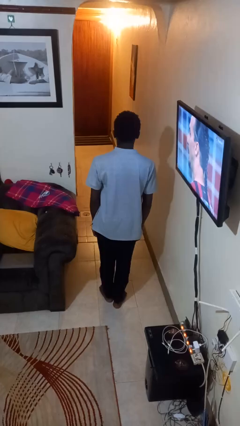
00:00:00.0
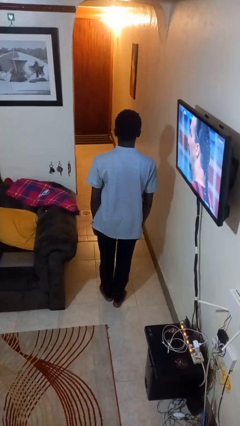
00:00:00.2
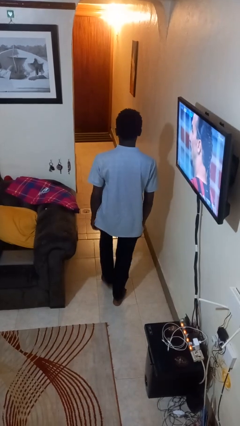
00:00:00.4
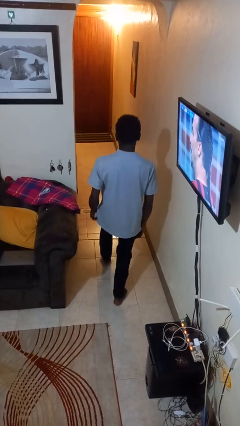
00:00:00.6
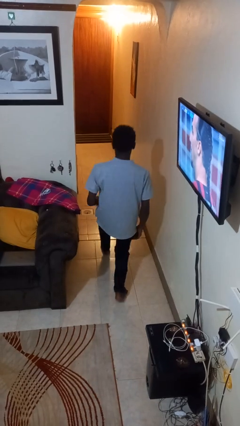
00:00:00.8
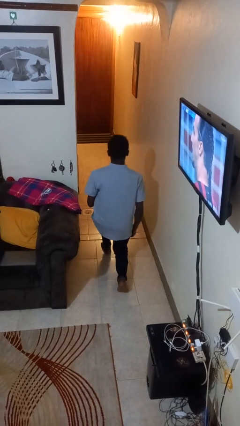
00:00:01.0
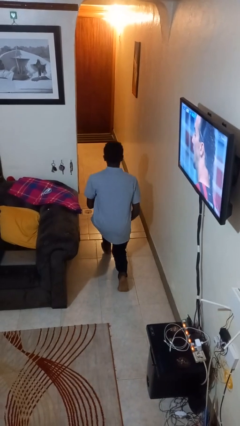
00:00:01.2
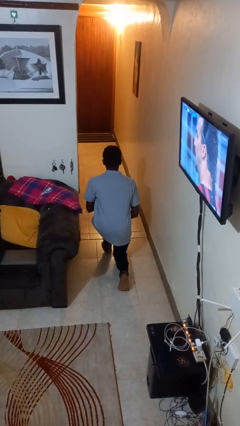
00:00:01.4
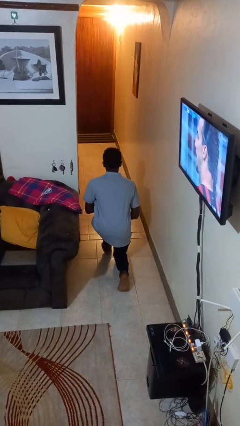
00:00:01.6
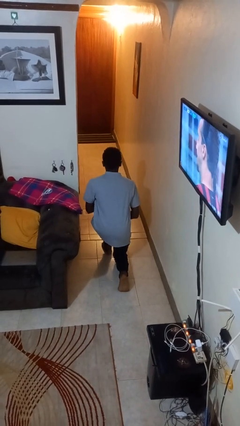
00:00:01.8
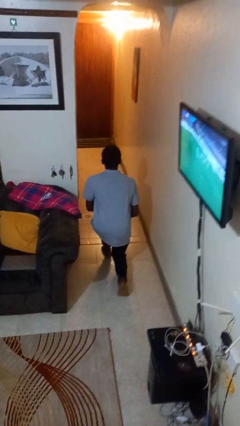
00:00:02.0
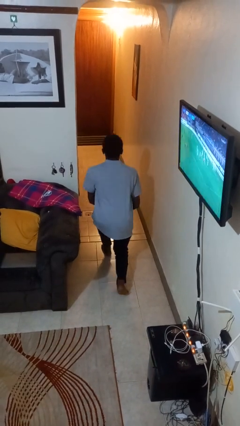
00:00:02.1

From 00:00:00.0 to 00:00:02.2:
person exercises with lunges

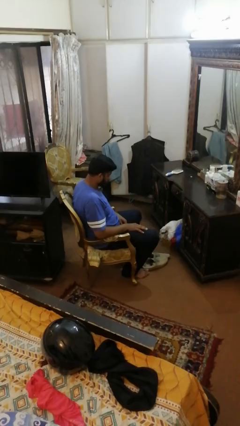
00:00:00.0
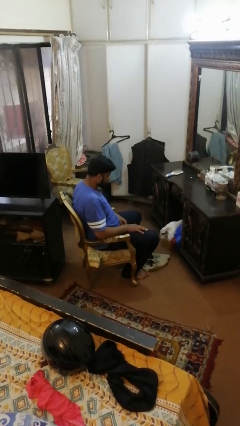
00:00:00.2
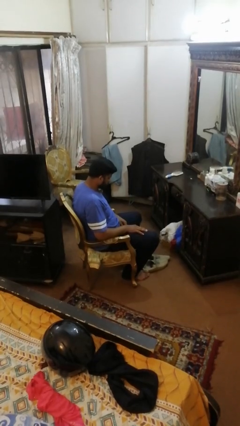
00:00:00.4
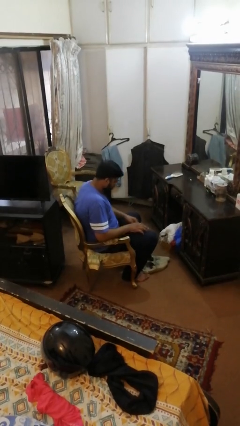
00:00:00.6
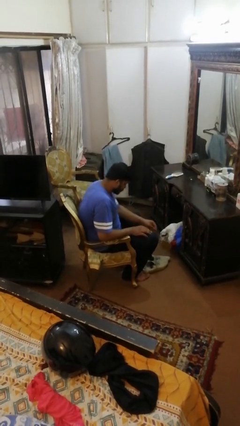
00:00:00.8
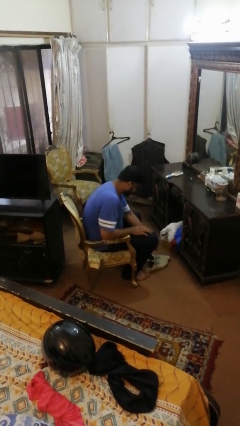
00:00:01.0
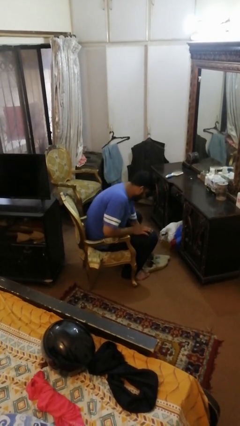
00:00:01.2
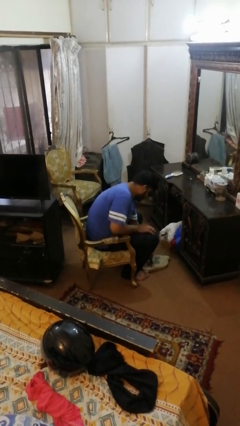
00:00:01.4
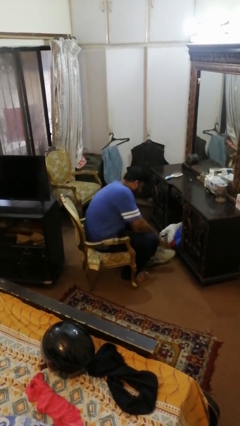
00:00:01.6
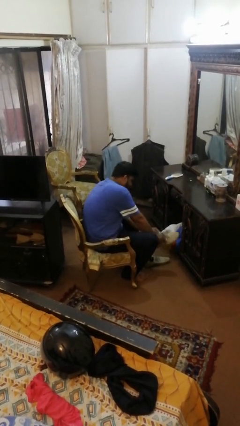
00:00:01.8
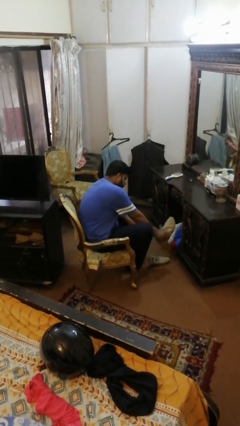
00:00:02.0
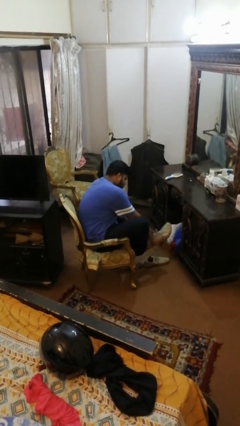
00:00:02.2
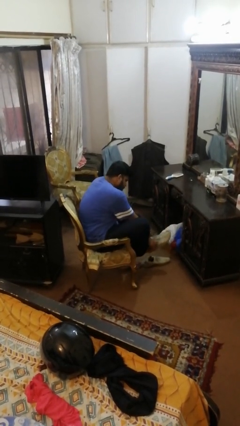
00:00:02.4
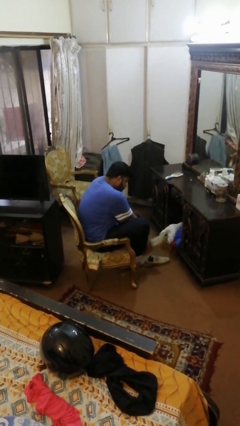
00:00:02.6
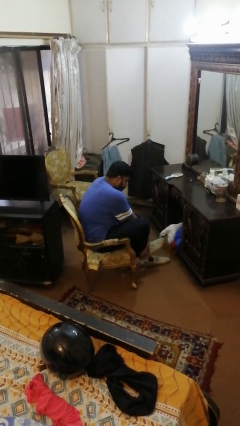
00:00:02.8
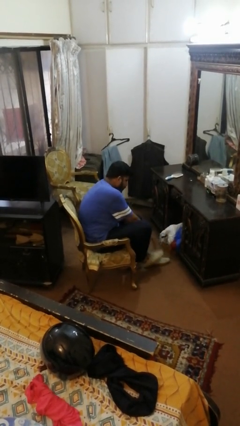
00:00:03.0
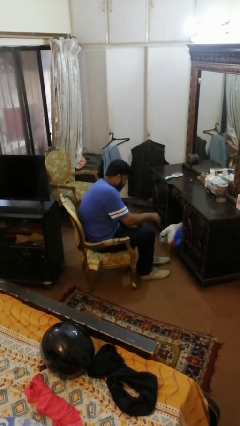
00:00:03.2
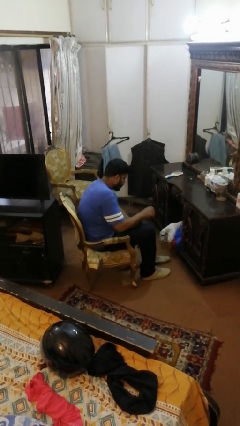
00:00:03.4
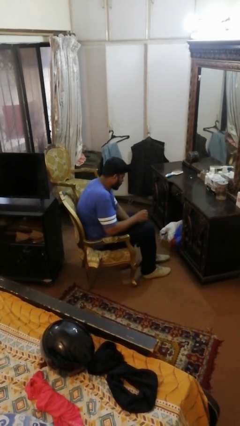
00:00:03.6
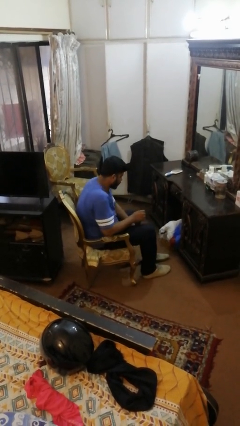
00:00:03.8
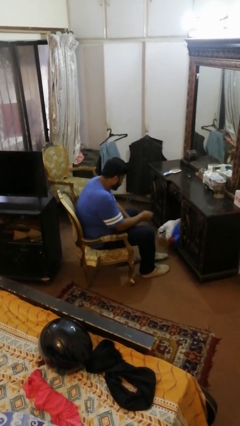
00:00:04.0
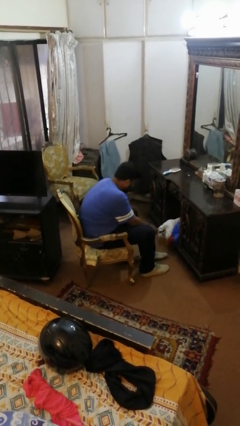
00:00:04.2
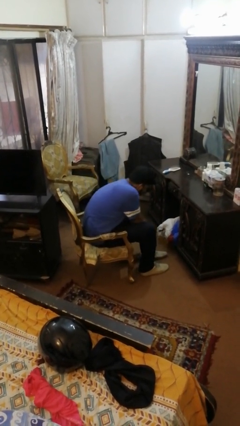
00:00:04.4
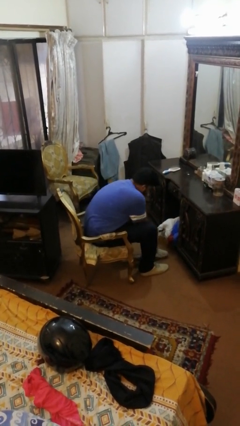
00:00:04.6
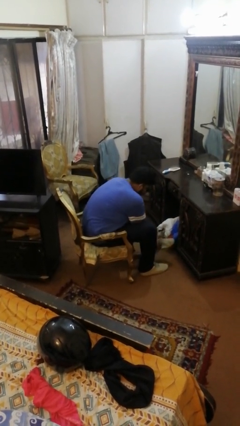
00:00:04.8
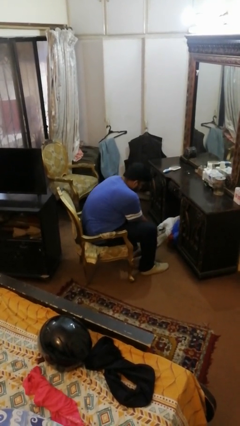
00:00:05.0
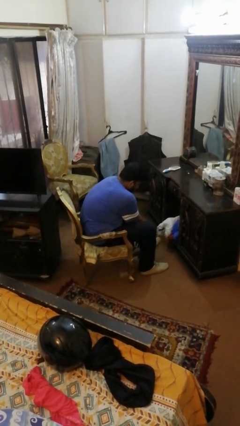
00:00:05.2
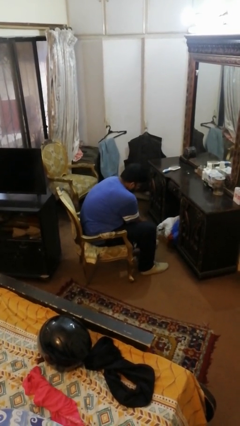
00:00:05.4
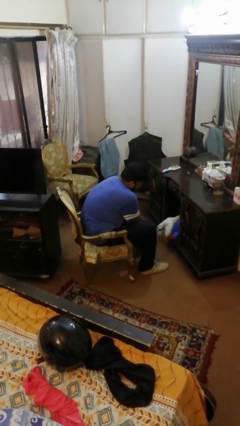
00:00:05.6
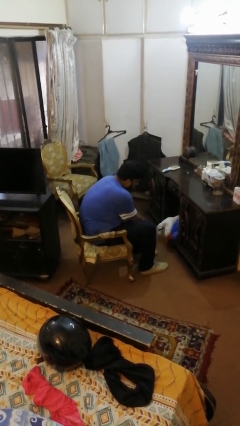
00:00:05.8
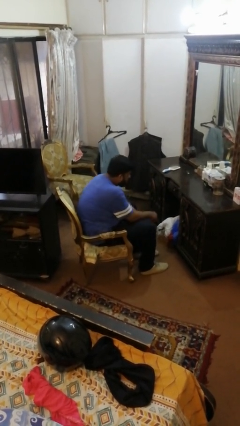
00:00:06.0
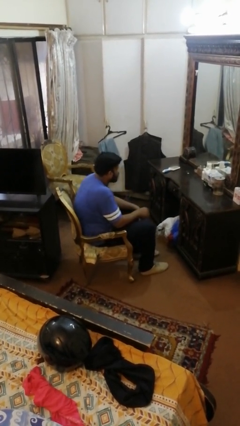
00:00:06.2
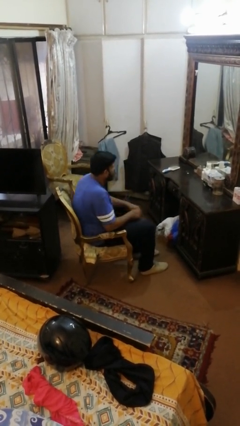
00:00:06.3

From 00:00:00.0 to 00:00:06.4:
person puts on shoes

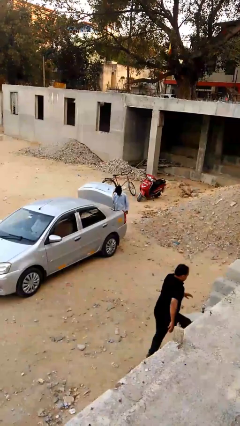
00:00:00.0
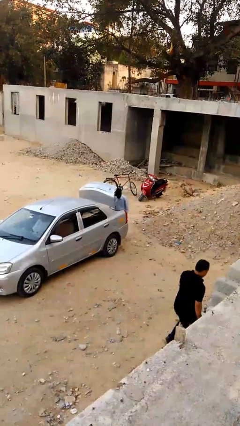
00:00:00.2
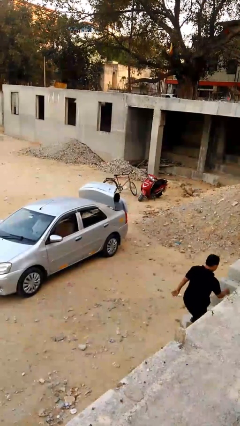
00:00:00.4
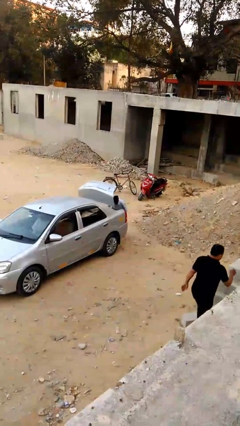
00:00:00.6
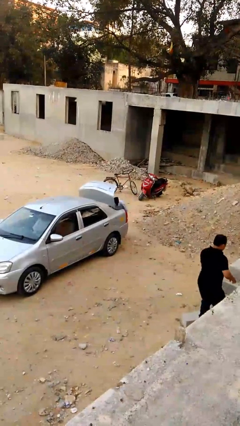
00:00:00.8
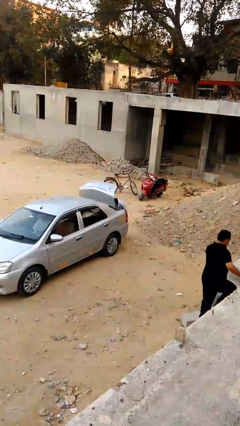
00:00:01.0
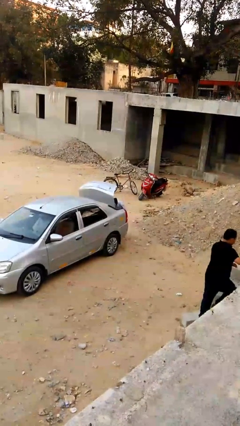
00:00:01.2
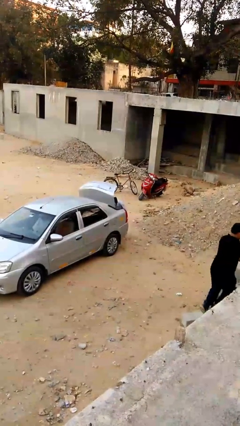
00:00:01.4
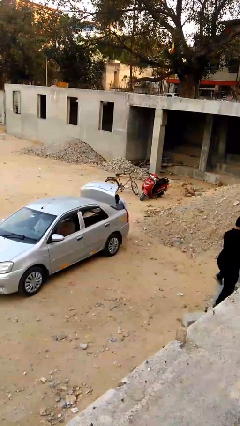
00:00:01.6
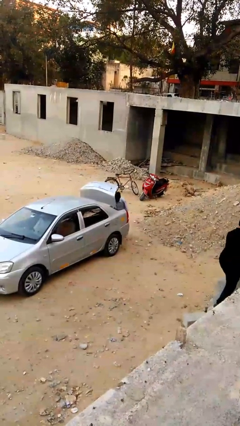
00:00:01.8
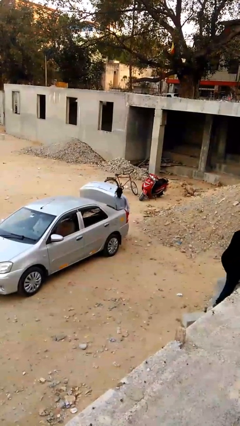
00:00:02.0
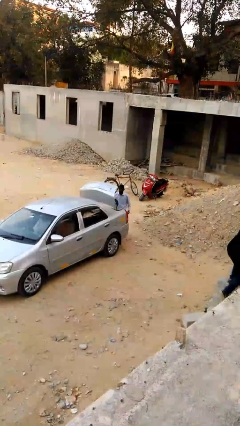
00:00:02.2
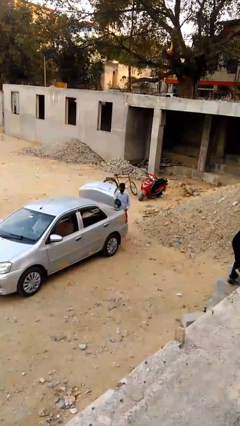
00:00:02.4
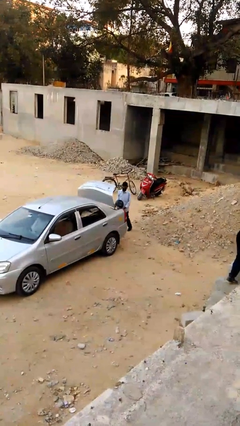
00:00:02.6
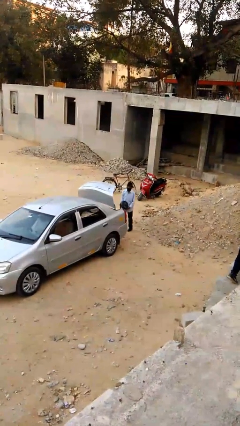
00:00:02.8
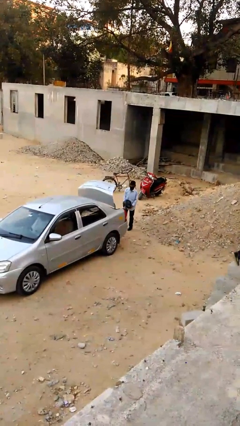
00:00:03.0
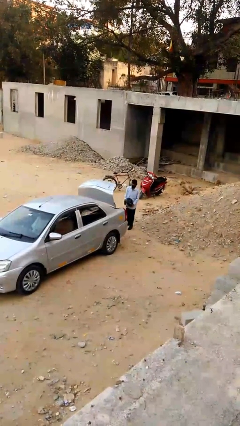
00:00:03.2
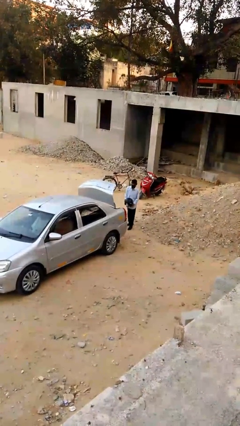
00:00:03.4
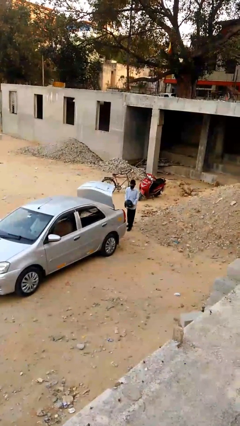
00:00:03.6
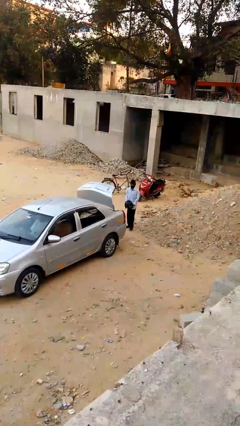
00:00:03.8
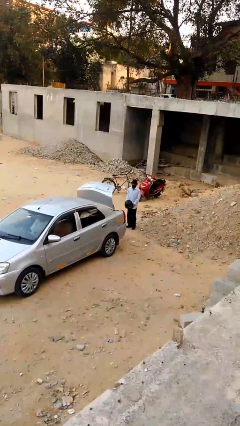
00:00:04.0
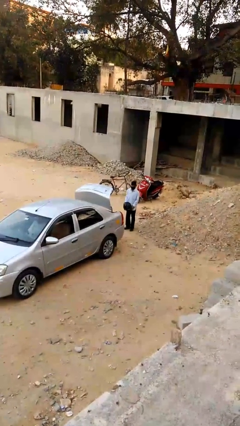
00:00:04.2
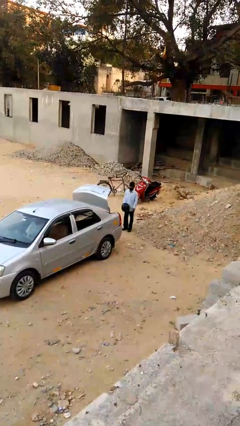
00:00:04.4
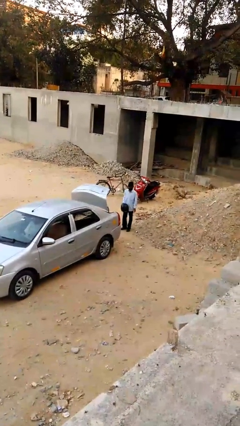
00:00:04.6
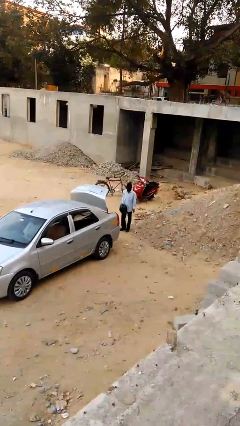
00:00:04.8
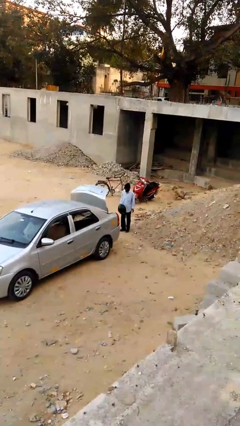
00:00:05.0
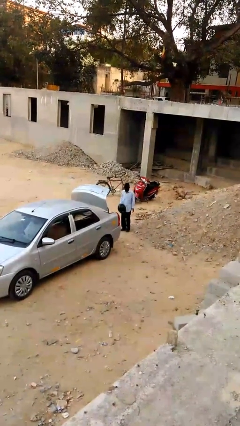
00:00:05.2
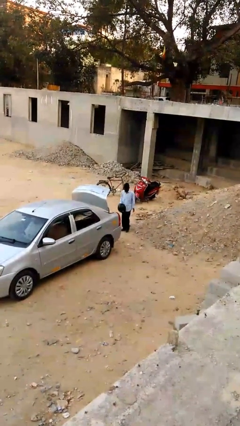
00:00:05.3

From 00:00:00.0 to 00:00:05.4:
person unloads car

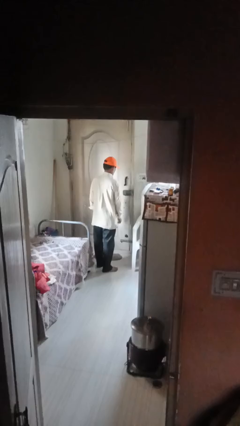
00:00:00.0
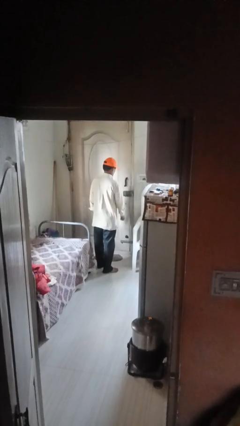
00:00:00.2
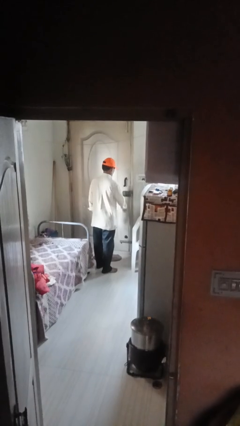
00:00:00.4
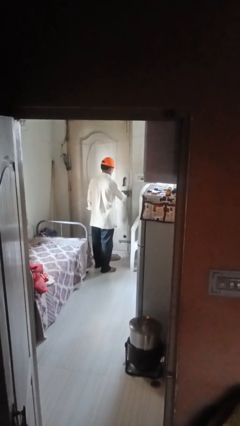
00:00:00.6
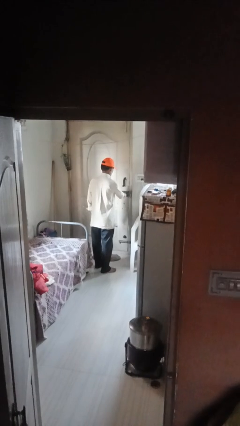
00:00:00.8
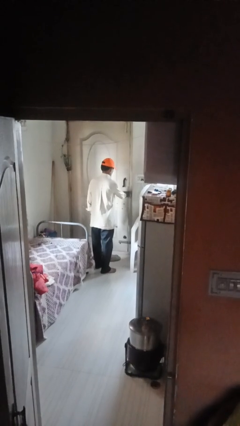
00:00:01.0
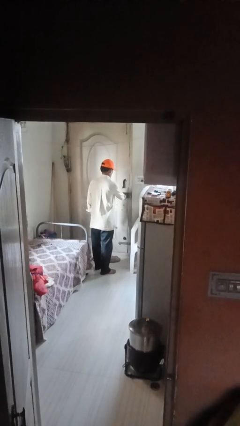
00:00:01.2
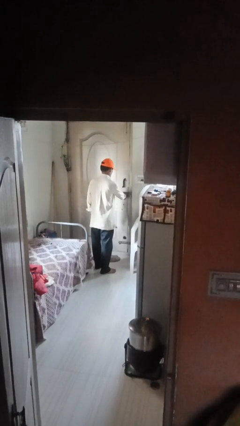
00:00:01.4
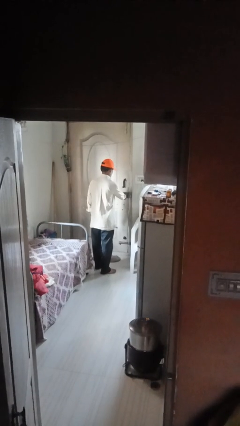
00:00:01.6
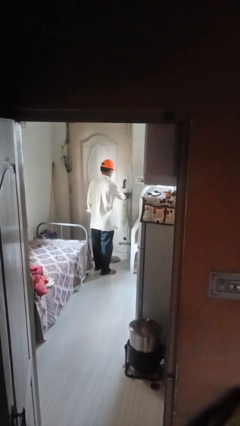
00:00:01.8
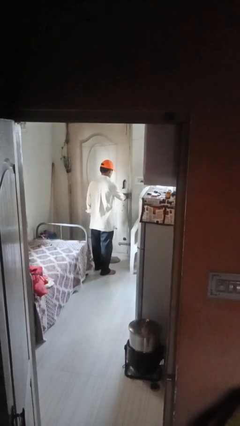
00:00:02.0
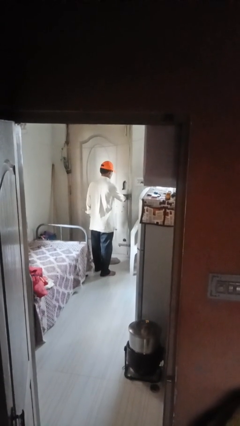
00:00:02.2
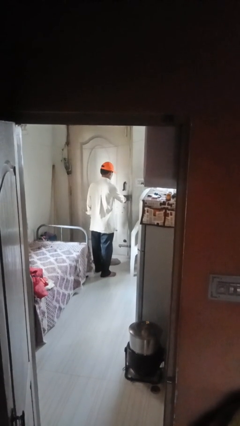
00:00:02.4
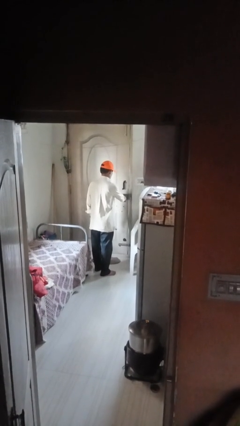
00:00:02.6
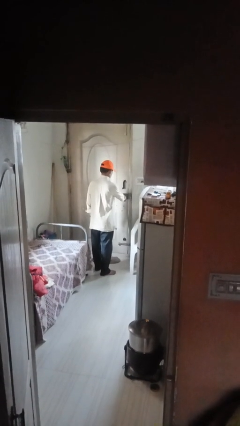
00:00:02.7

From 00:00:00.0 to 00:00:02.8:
person unlocks door with keys

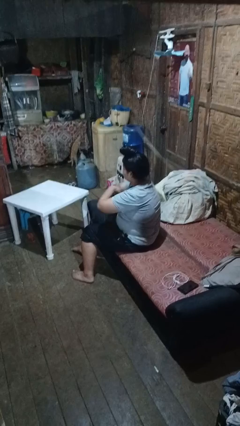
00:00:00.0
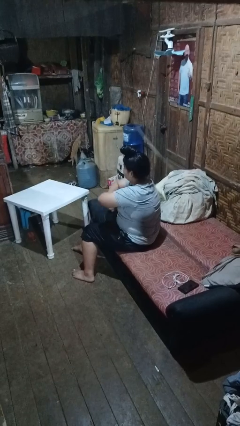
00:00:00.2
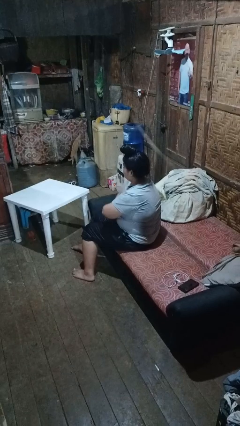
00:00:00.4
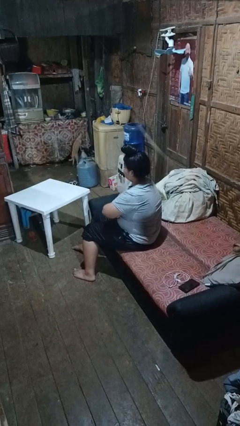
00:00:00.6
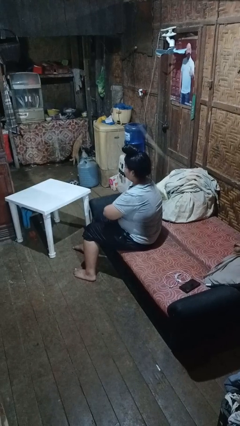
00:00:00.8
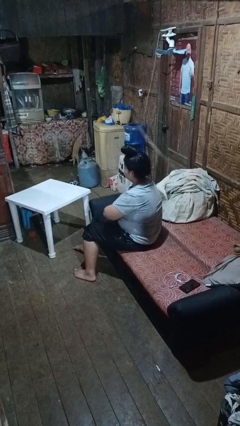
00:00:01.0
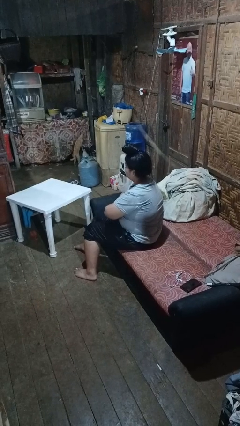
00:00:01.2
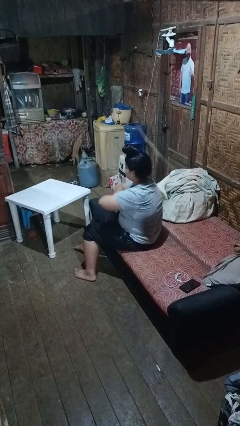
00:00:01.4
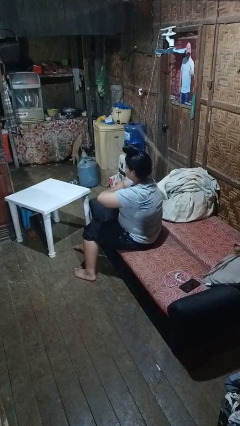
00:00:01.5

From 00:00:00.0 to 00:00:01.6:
person crosses arms
